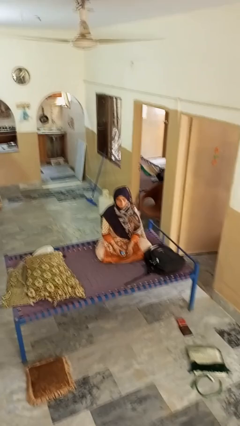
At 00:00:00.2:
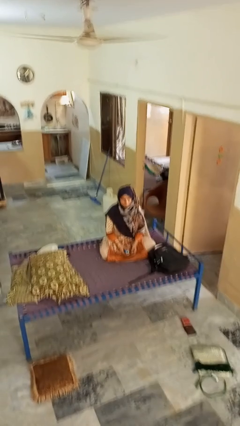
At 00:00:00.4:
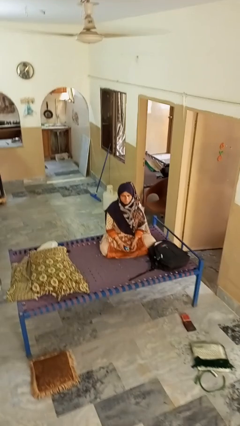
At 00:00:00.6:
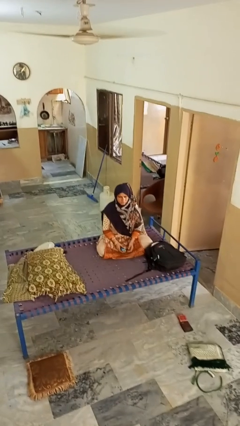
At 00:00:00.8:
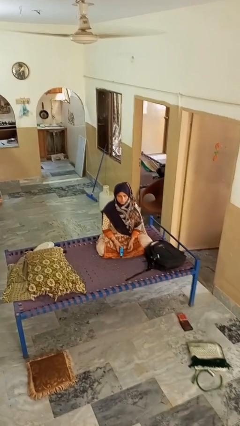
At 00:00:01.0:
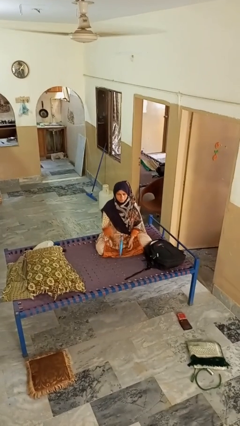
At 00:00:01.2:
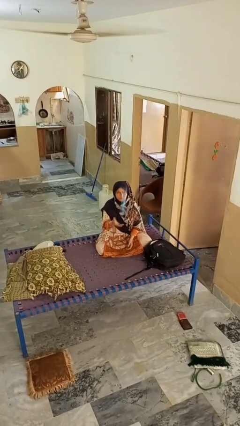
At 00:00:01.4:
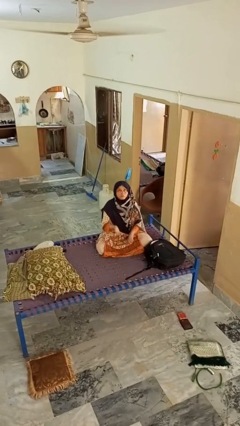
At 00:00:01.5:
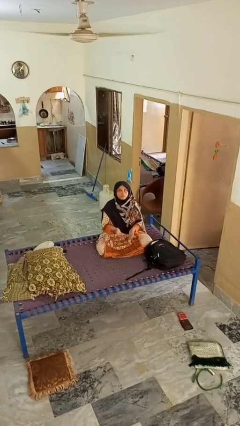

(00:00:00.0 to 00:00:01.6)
person drops object

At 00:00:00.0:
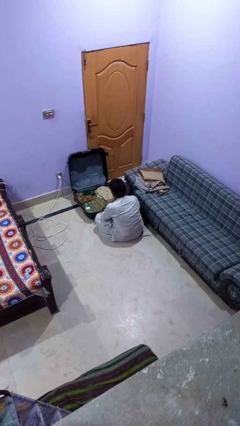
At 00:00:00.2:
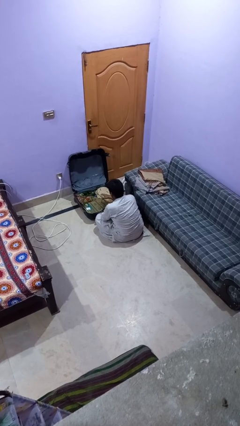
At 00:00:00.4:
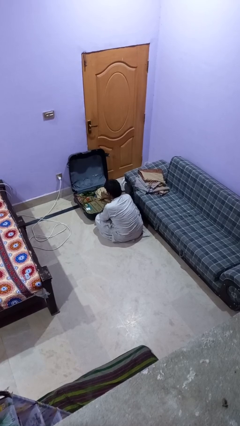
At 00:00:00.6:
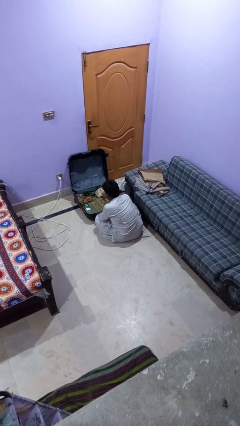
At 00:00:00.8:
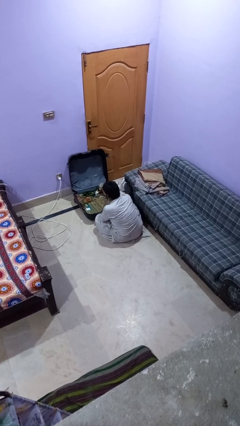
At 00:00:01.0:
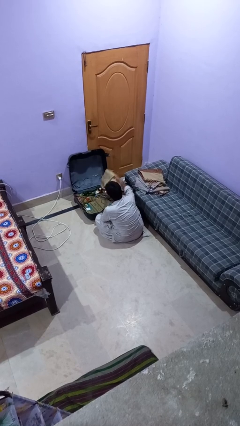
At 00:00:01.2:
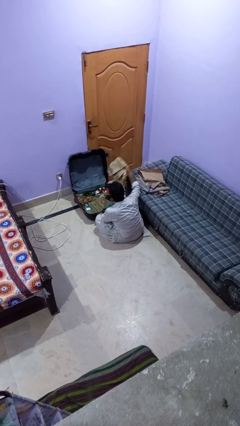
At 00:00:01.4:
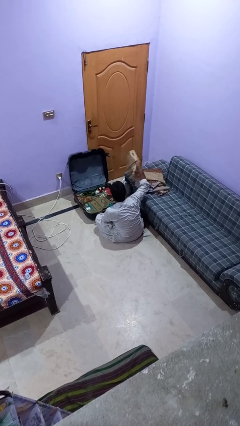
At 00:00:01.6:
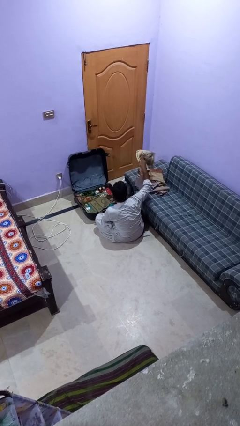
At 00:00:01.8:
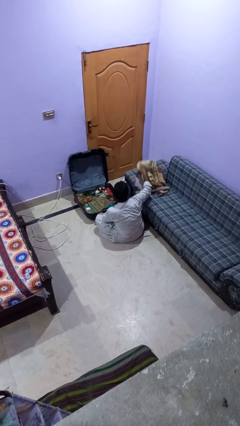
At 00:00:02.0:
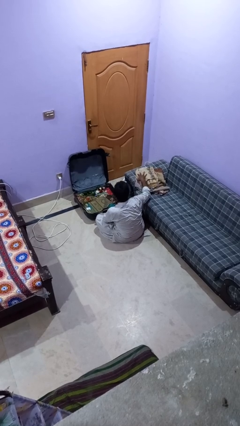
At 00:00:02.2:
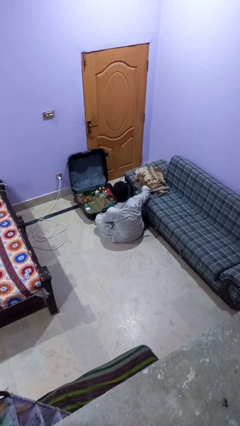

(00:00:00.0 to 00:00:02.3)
person unloads clothes from suitcase

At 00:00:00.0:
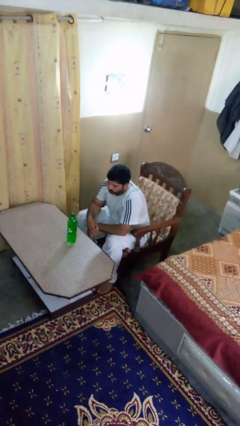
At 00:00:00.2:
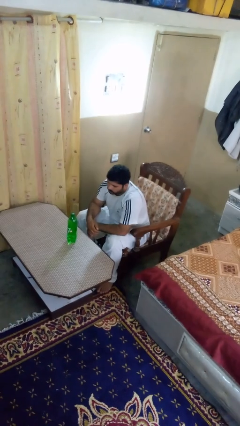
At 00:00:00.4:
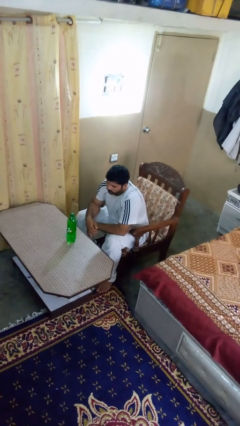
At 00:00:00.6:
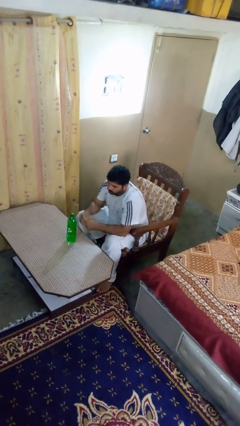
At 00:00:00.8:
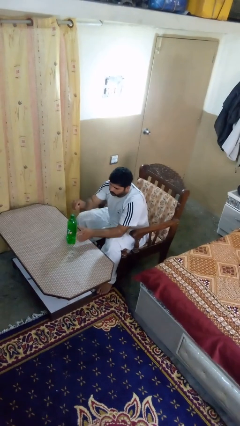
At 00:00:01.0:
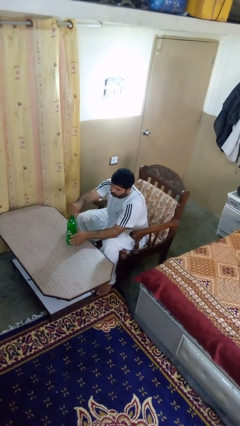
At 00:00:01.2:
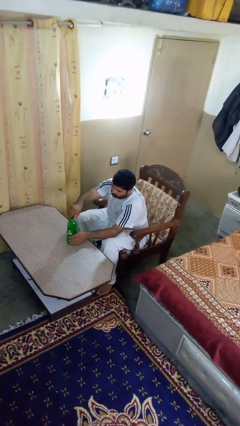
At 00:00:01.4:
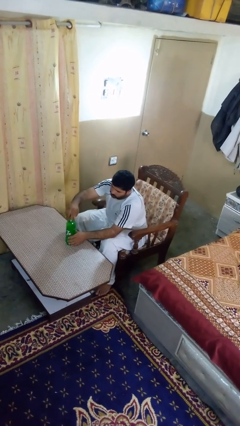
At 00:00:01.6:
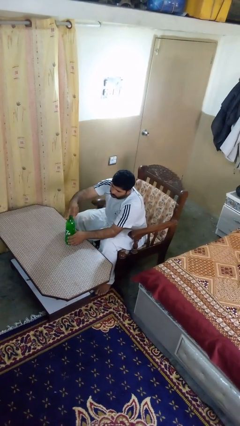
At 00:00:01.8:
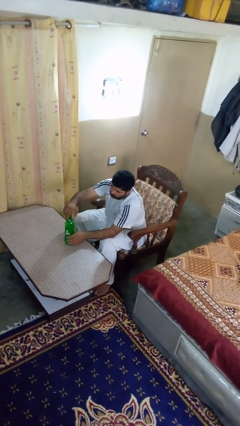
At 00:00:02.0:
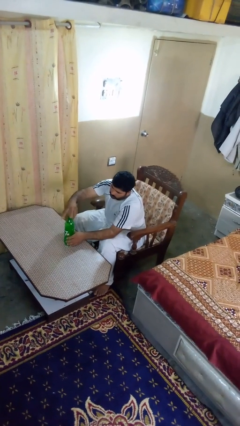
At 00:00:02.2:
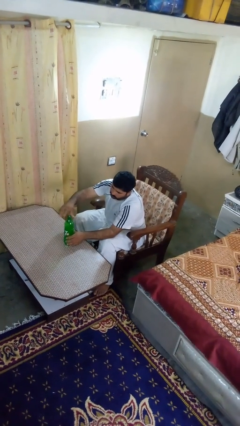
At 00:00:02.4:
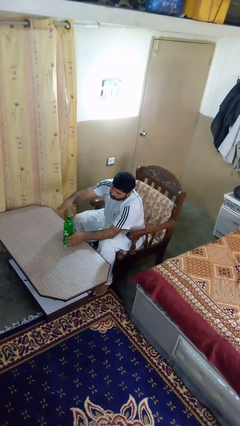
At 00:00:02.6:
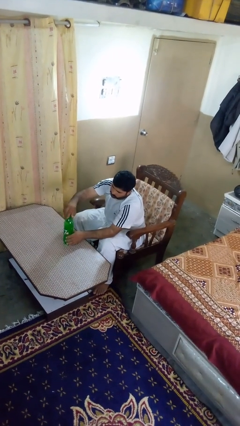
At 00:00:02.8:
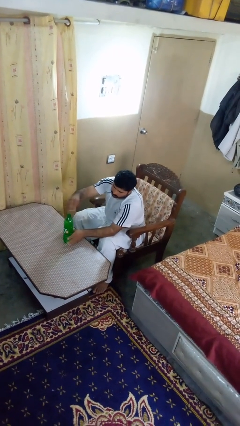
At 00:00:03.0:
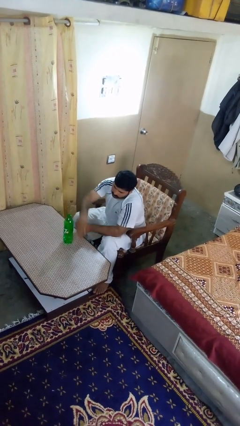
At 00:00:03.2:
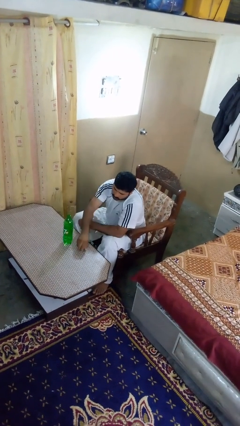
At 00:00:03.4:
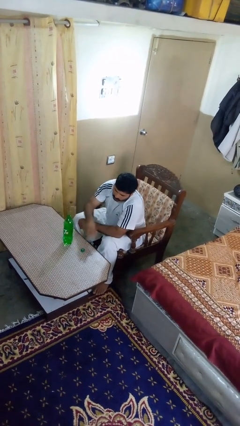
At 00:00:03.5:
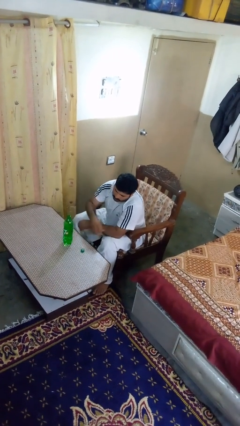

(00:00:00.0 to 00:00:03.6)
person unscrews lid from bottle

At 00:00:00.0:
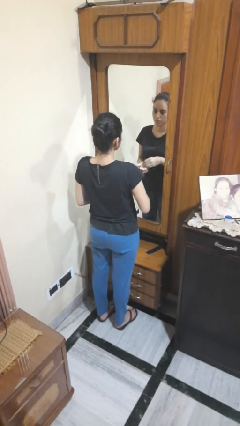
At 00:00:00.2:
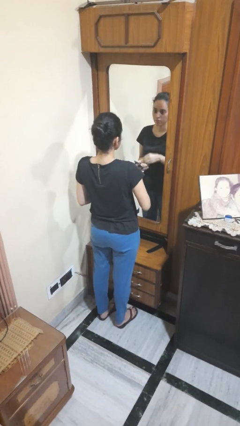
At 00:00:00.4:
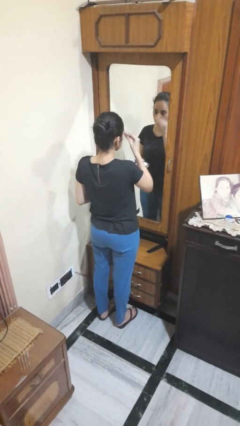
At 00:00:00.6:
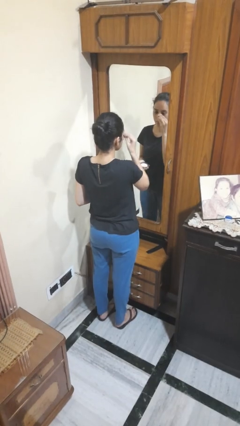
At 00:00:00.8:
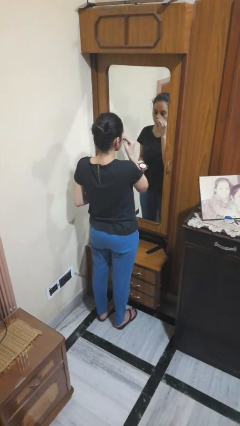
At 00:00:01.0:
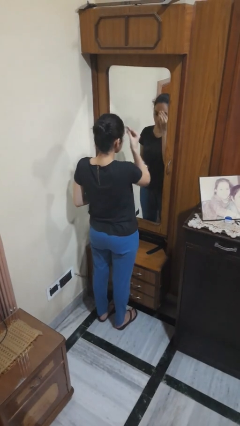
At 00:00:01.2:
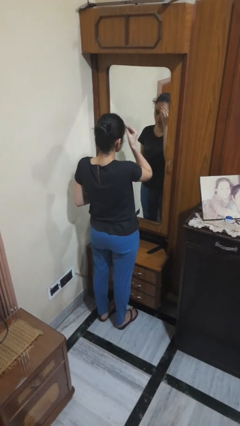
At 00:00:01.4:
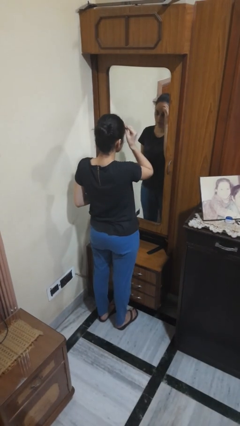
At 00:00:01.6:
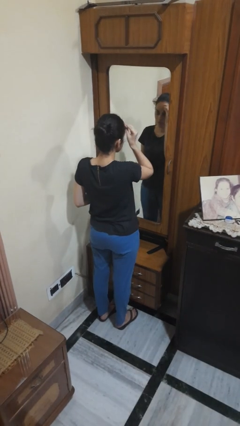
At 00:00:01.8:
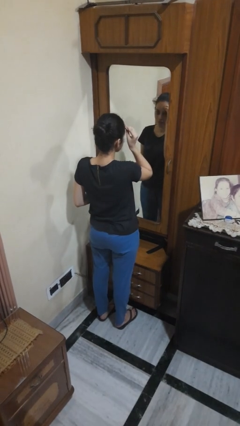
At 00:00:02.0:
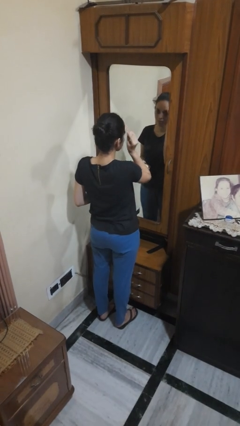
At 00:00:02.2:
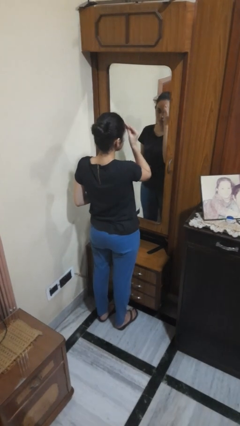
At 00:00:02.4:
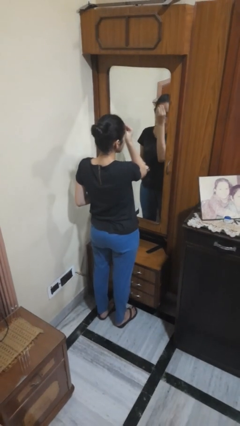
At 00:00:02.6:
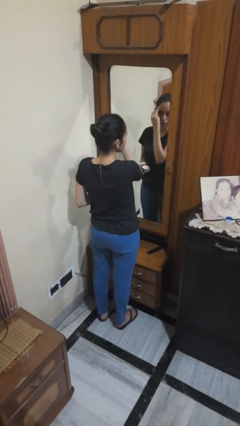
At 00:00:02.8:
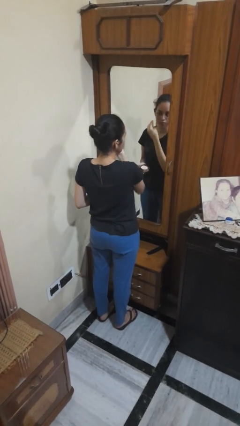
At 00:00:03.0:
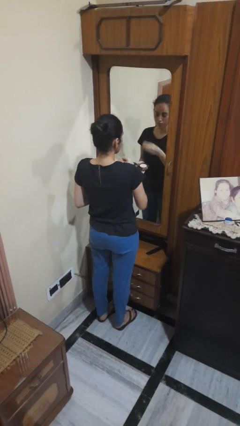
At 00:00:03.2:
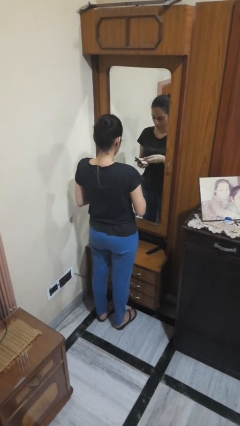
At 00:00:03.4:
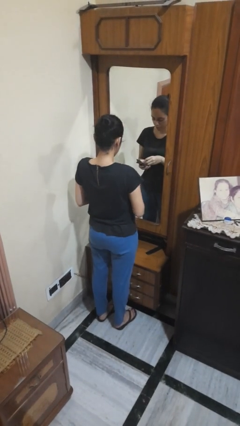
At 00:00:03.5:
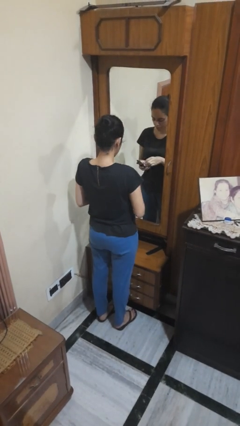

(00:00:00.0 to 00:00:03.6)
person applies foundation makeup

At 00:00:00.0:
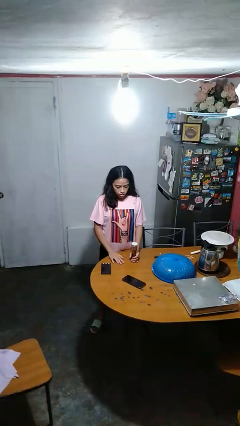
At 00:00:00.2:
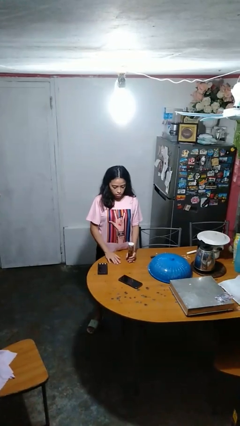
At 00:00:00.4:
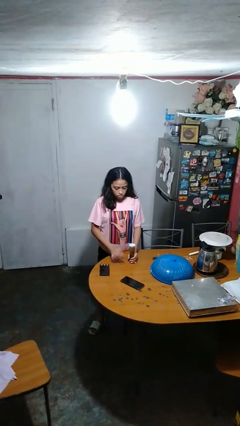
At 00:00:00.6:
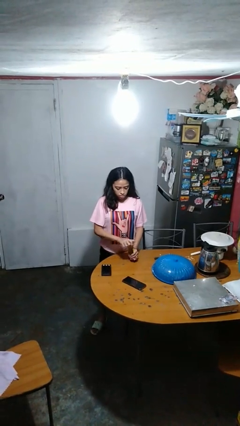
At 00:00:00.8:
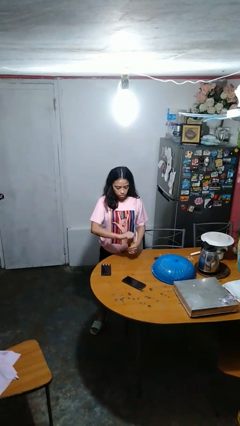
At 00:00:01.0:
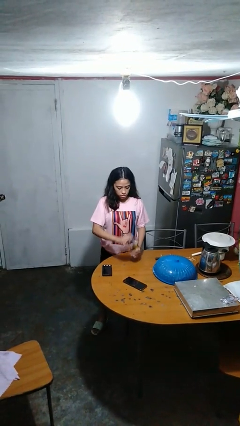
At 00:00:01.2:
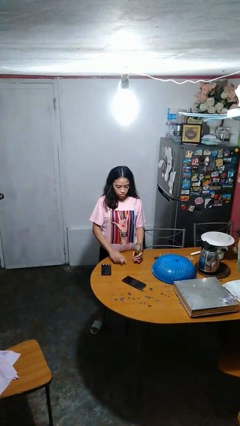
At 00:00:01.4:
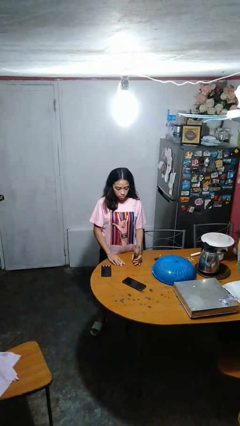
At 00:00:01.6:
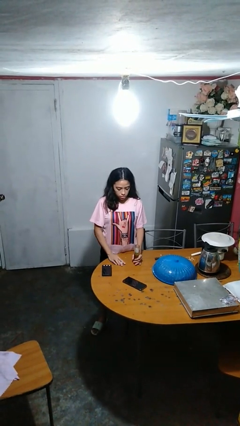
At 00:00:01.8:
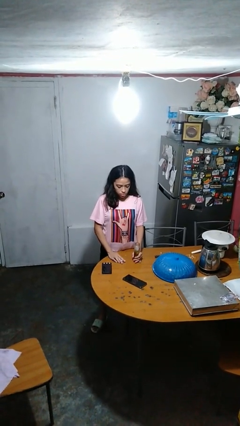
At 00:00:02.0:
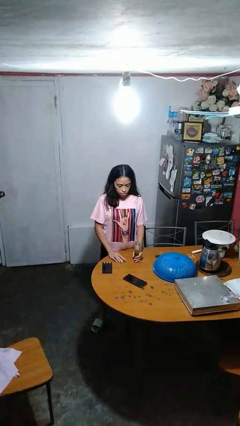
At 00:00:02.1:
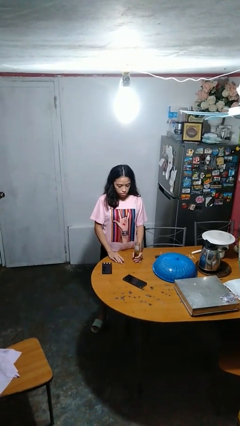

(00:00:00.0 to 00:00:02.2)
person opens jar

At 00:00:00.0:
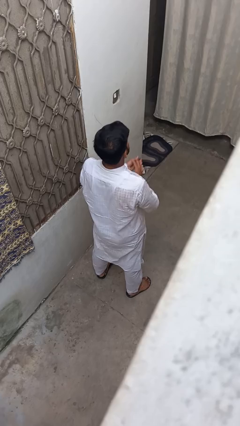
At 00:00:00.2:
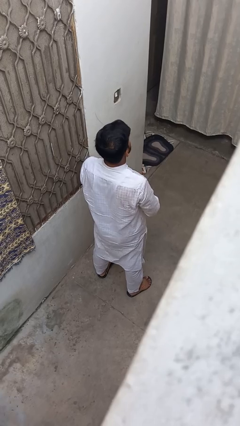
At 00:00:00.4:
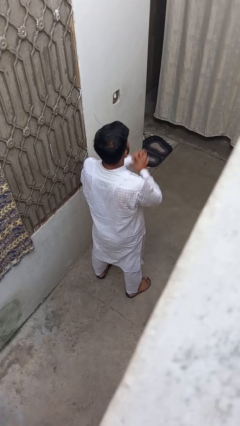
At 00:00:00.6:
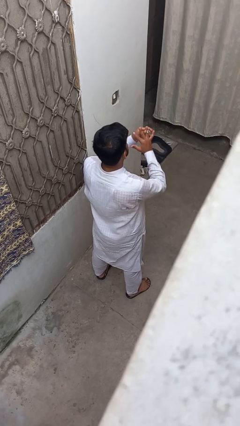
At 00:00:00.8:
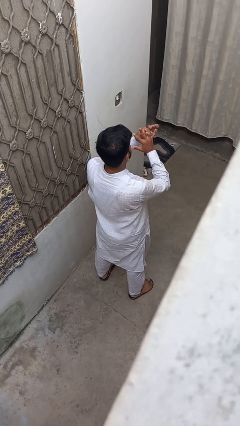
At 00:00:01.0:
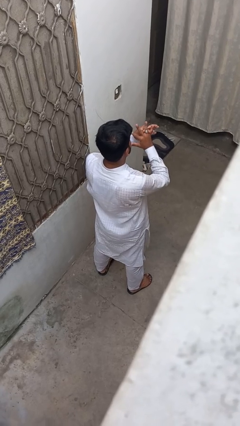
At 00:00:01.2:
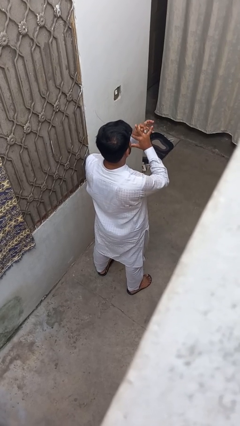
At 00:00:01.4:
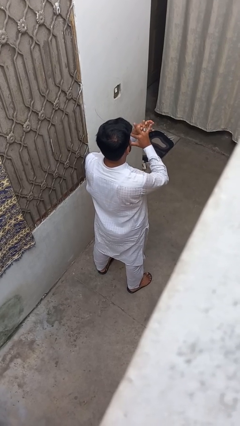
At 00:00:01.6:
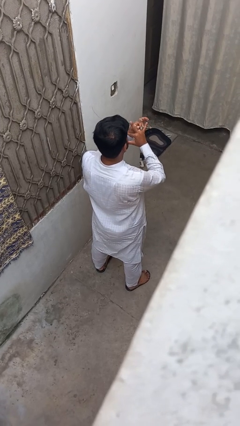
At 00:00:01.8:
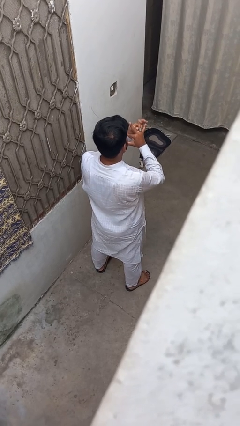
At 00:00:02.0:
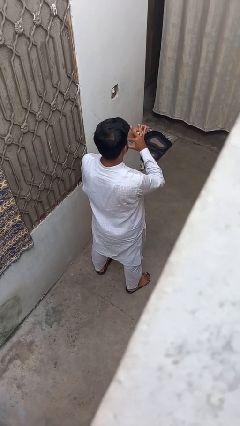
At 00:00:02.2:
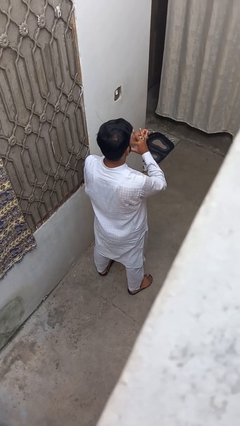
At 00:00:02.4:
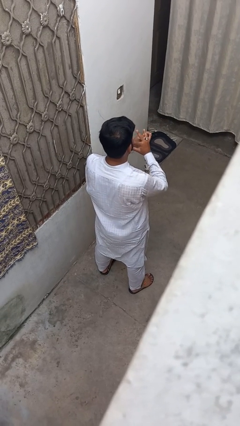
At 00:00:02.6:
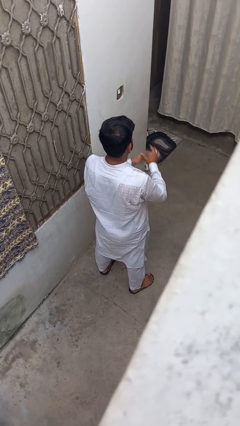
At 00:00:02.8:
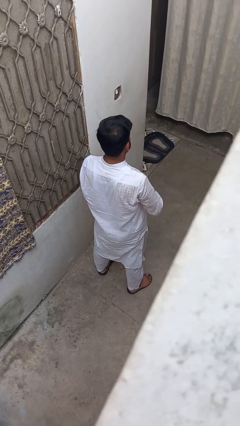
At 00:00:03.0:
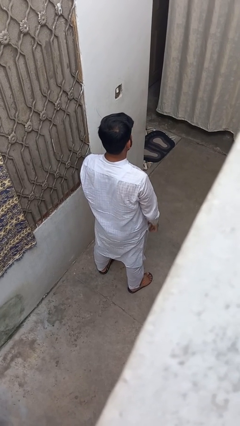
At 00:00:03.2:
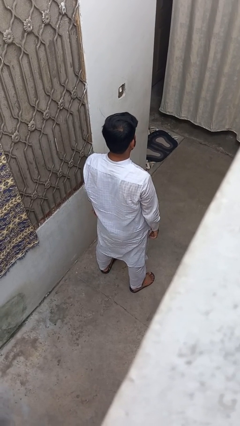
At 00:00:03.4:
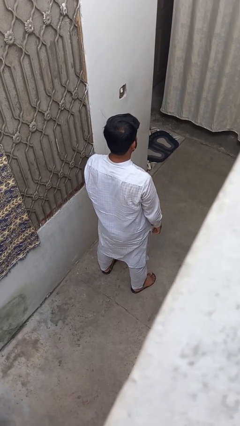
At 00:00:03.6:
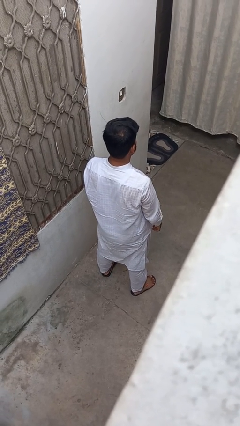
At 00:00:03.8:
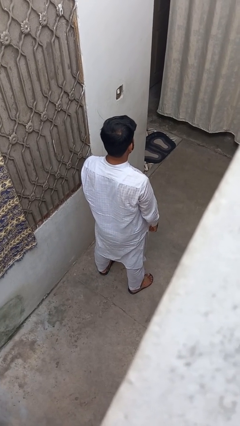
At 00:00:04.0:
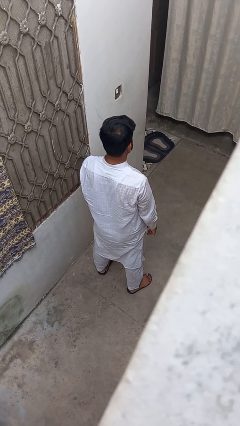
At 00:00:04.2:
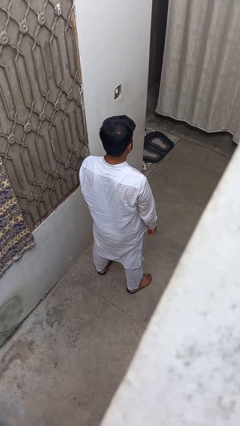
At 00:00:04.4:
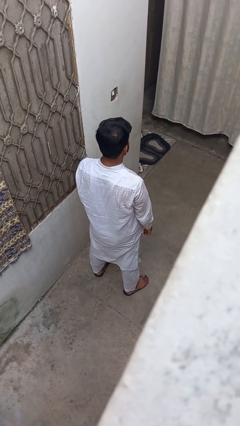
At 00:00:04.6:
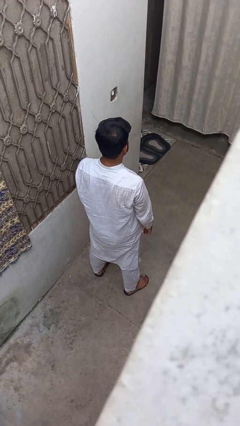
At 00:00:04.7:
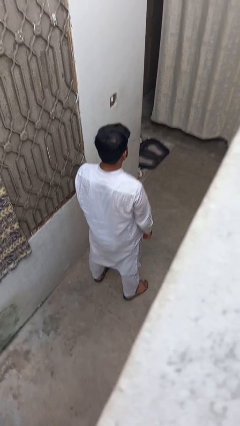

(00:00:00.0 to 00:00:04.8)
person puts on ring
